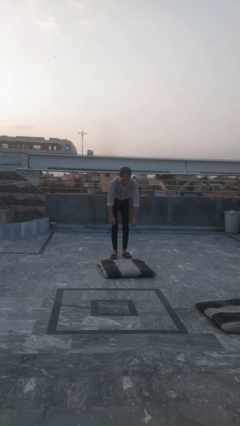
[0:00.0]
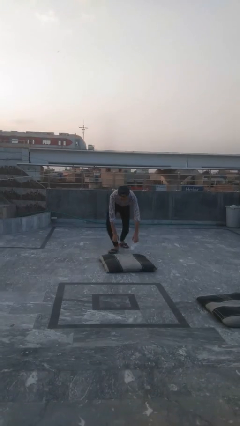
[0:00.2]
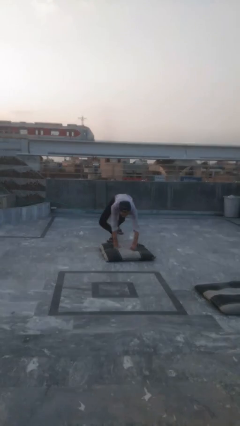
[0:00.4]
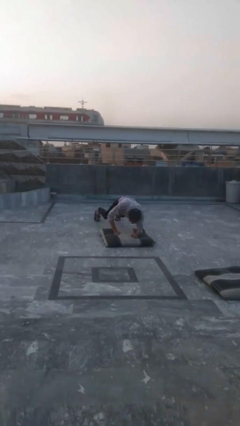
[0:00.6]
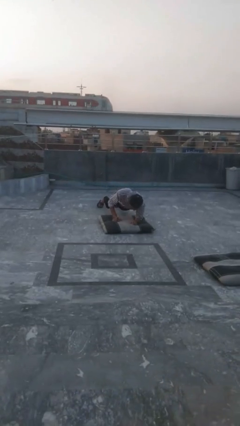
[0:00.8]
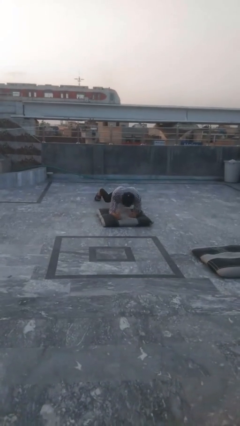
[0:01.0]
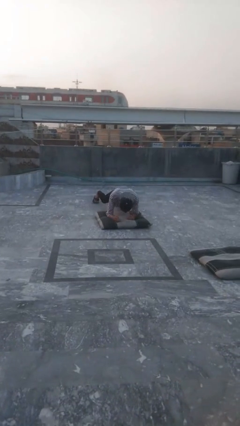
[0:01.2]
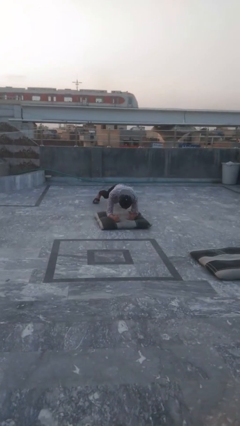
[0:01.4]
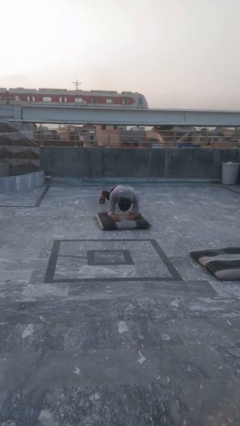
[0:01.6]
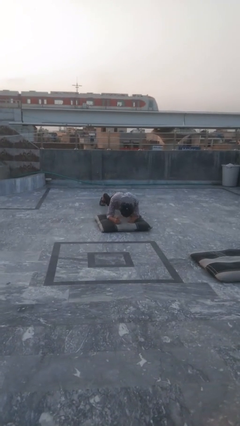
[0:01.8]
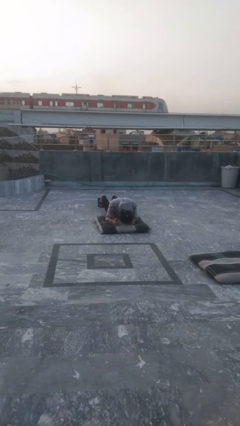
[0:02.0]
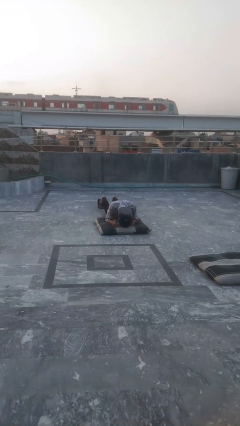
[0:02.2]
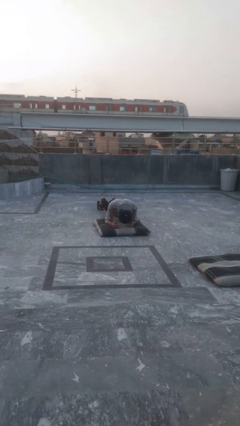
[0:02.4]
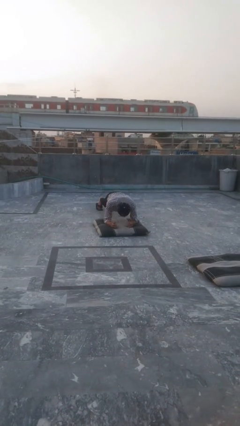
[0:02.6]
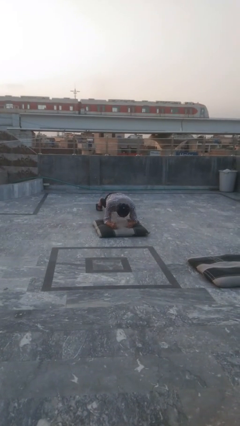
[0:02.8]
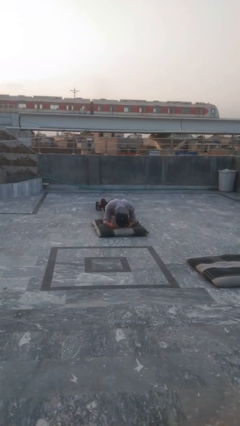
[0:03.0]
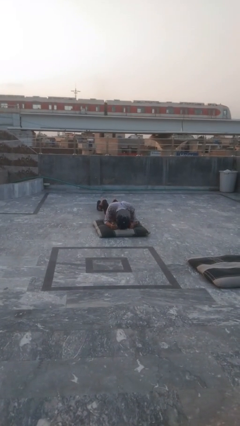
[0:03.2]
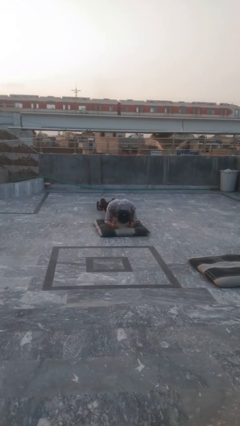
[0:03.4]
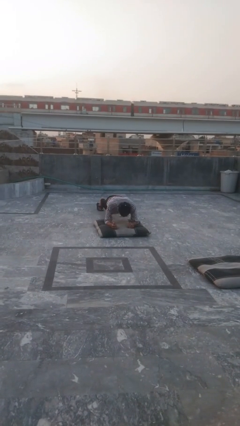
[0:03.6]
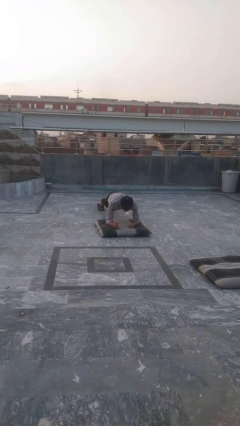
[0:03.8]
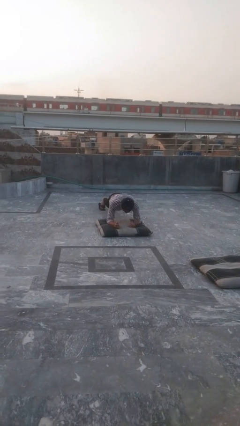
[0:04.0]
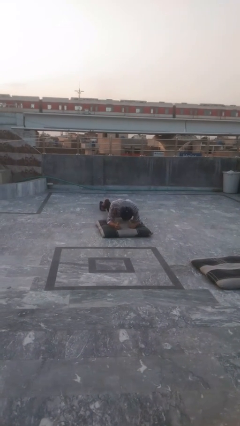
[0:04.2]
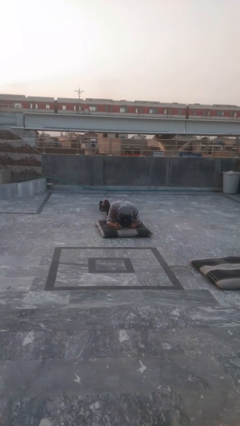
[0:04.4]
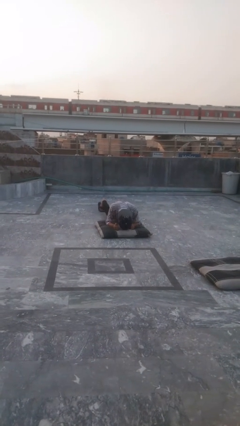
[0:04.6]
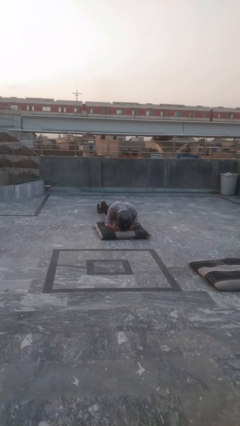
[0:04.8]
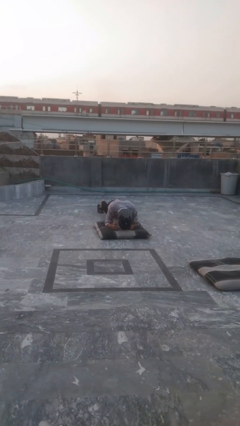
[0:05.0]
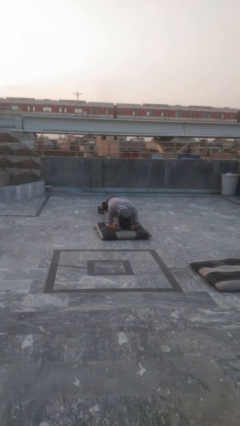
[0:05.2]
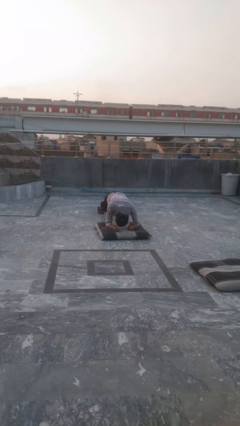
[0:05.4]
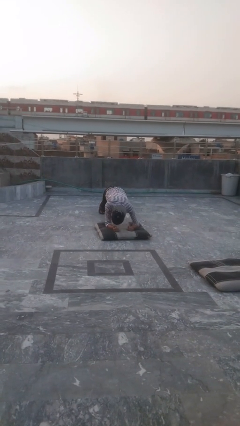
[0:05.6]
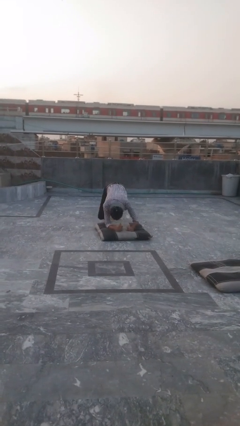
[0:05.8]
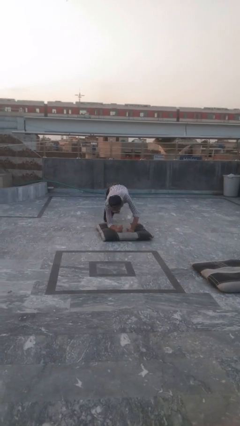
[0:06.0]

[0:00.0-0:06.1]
person exercises with plank

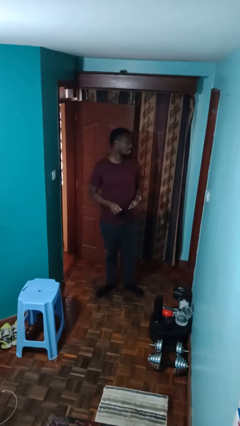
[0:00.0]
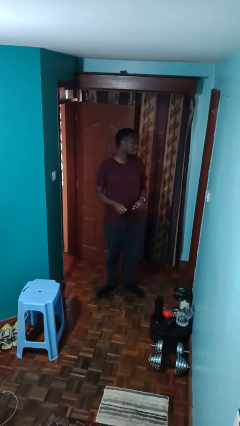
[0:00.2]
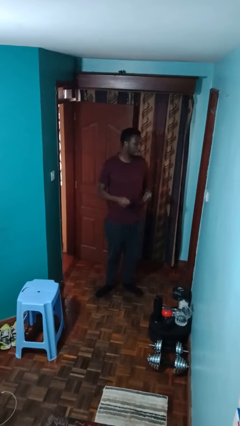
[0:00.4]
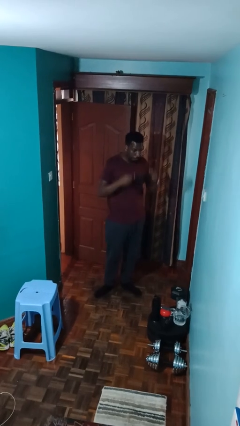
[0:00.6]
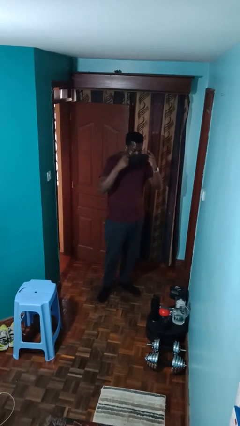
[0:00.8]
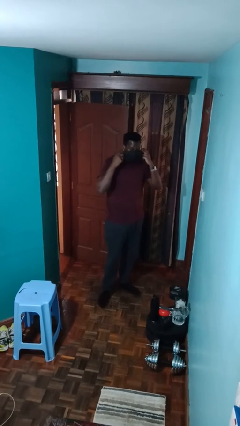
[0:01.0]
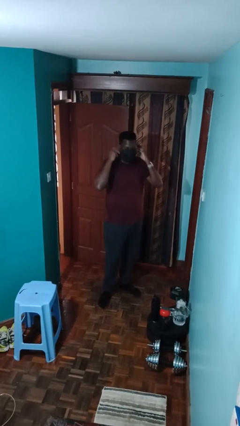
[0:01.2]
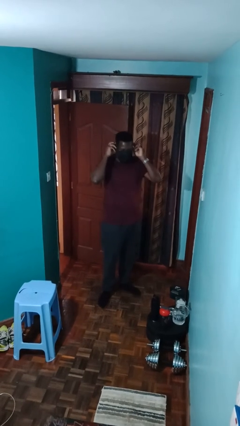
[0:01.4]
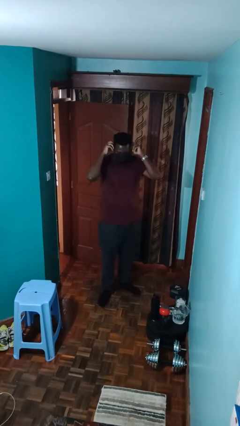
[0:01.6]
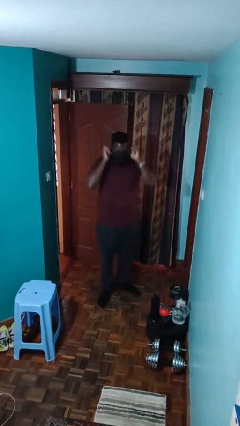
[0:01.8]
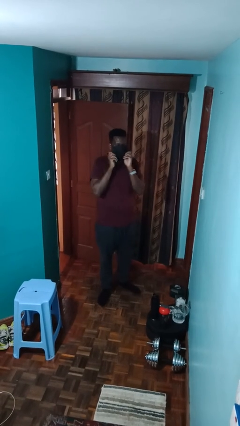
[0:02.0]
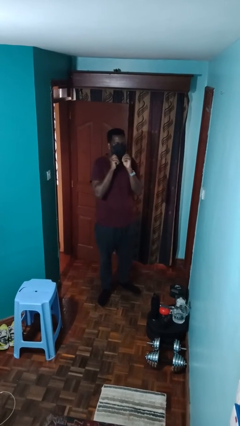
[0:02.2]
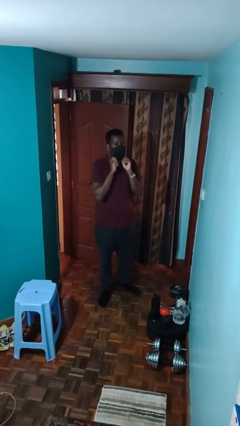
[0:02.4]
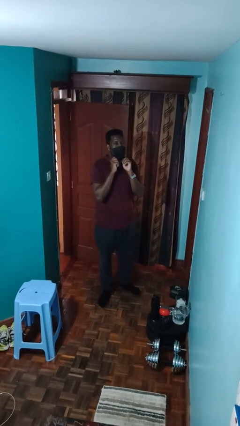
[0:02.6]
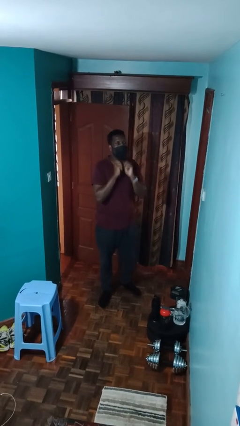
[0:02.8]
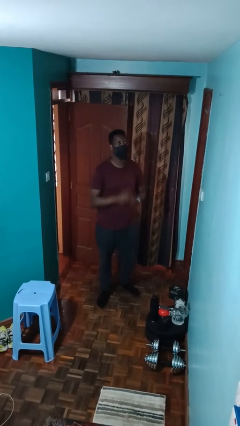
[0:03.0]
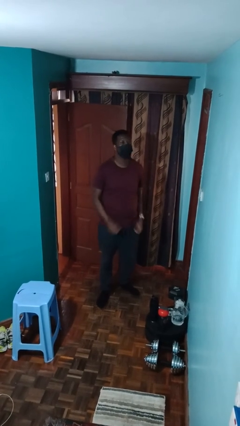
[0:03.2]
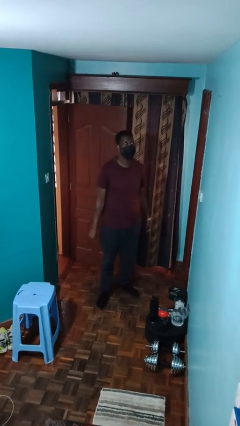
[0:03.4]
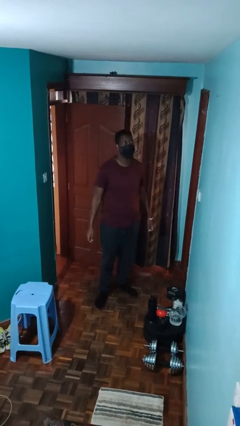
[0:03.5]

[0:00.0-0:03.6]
person puts on facemask

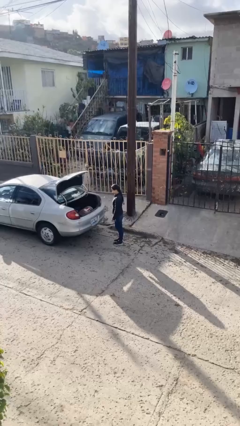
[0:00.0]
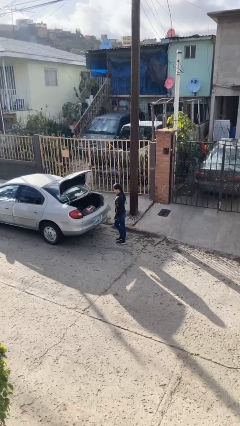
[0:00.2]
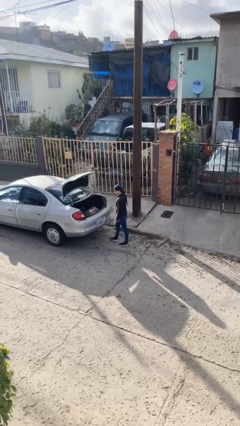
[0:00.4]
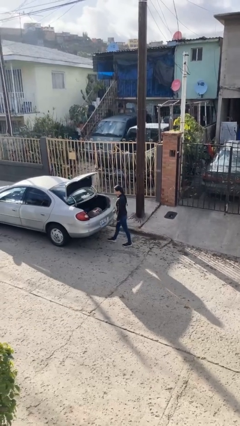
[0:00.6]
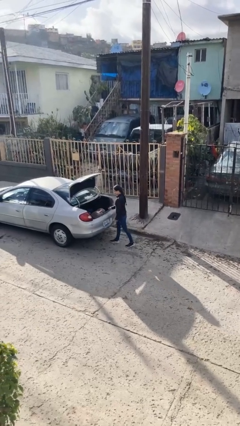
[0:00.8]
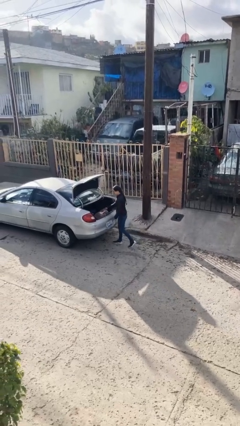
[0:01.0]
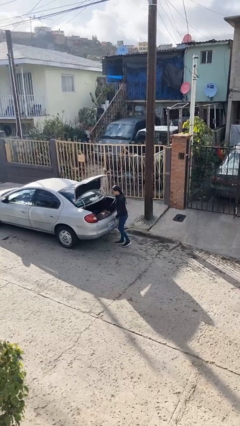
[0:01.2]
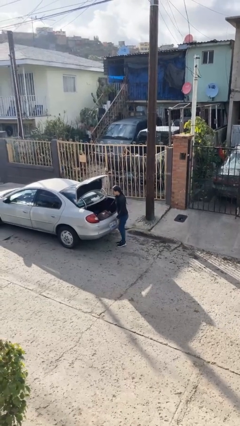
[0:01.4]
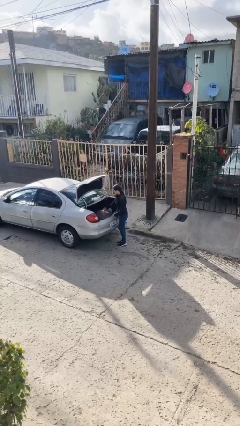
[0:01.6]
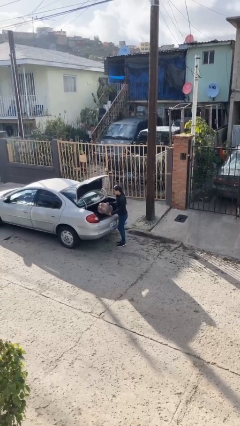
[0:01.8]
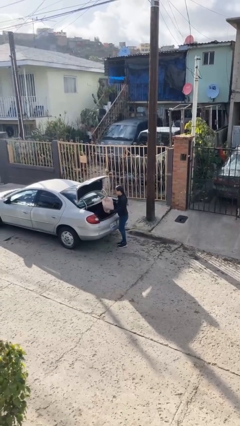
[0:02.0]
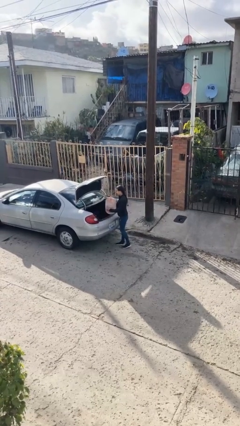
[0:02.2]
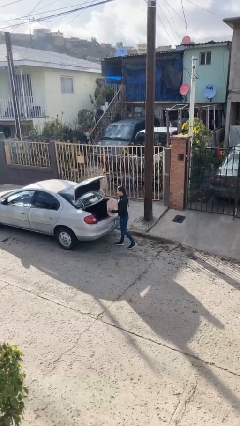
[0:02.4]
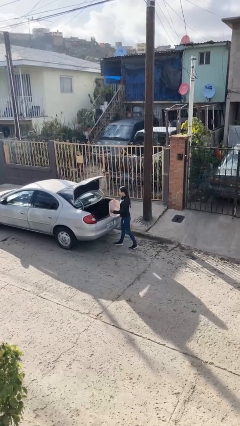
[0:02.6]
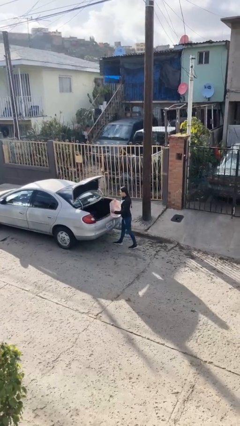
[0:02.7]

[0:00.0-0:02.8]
person unloads car

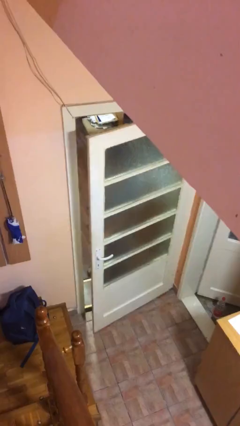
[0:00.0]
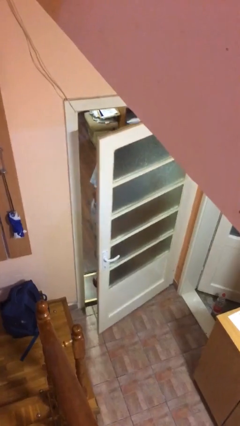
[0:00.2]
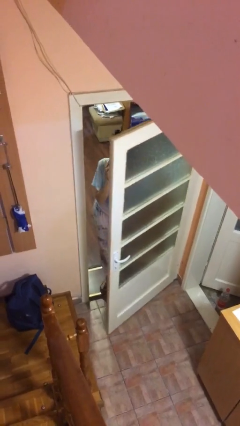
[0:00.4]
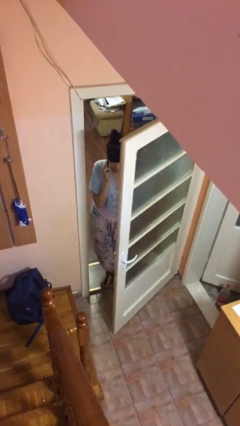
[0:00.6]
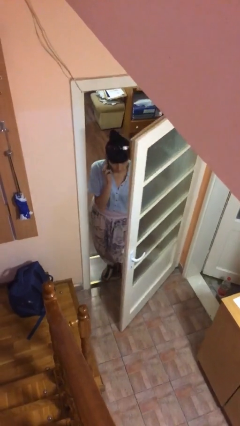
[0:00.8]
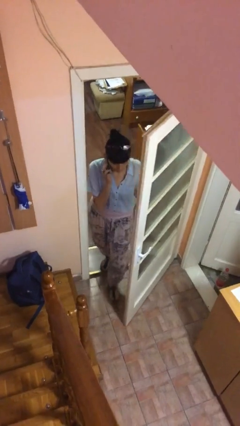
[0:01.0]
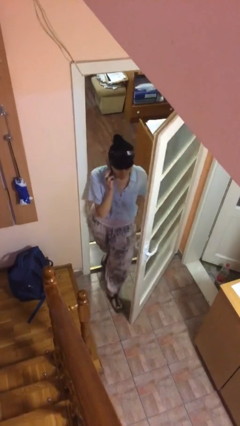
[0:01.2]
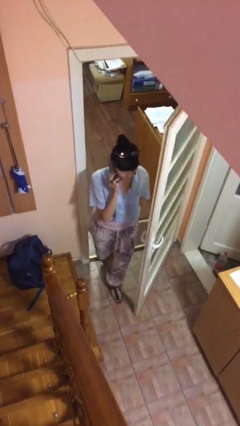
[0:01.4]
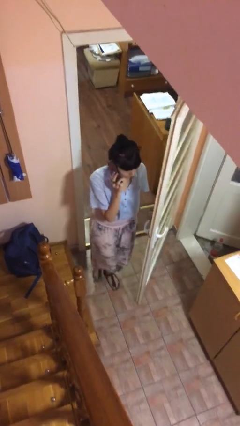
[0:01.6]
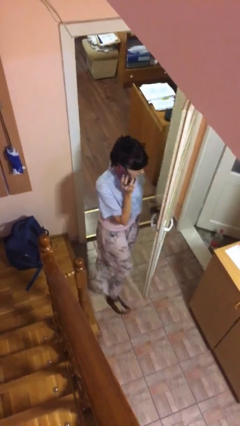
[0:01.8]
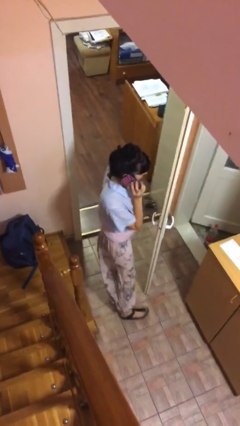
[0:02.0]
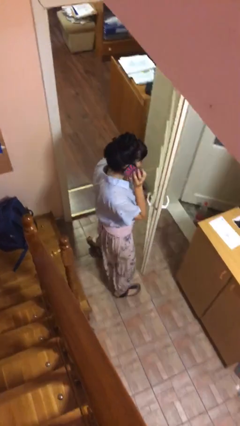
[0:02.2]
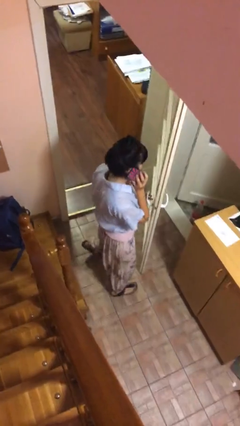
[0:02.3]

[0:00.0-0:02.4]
person enters scene through structure

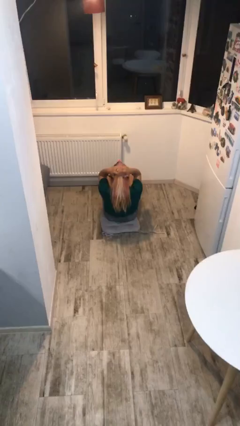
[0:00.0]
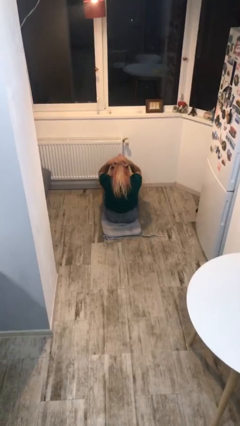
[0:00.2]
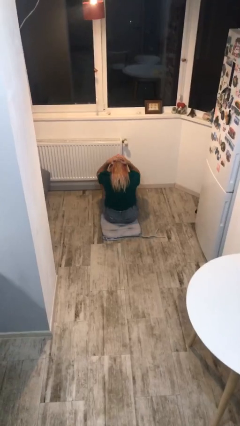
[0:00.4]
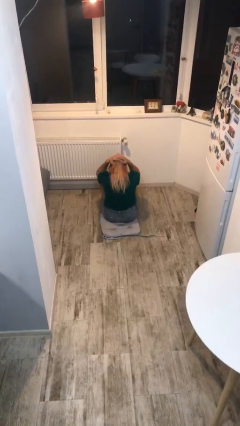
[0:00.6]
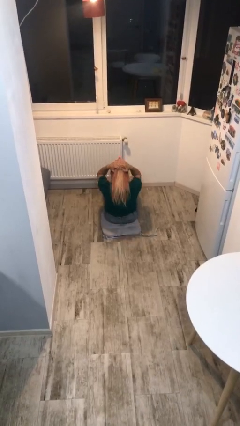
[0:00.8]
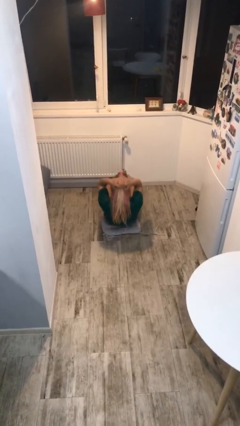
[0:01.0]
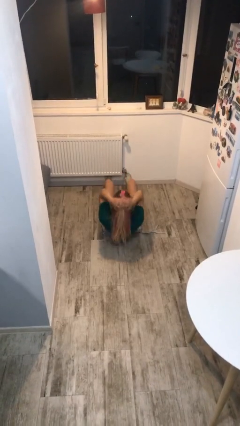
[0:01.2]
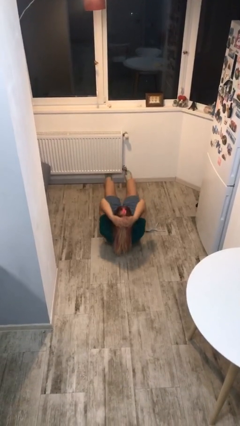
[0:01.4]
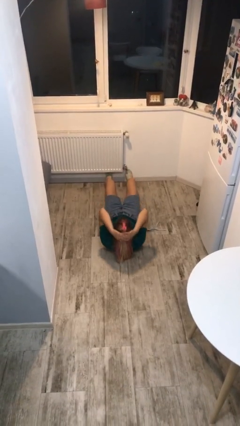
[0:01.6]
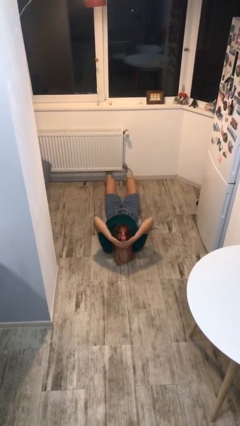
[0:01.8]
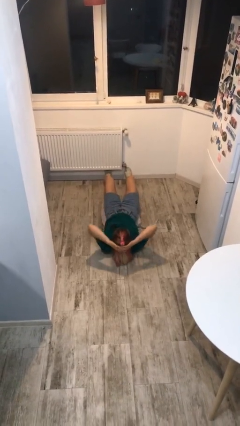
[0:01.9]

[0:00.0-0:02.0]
person exercises with situp

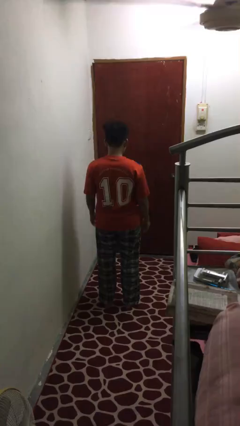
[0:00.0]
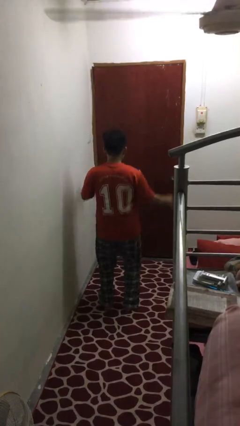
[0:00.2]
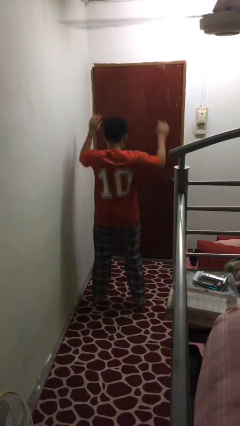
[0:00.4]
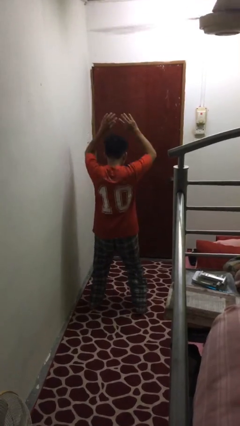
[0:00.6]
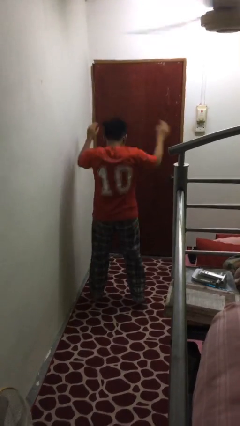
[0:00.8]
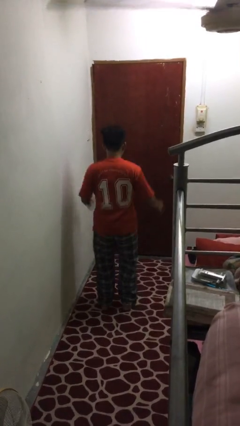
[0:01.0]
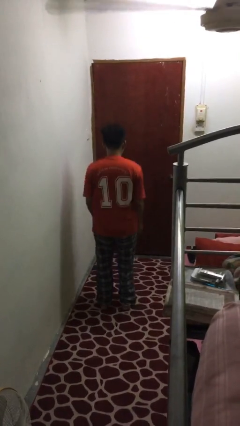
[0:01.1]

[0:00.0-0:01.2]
person exercises with jumping jacks
